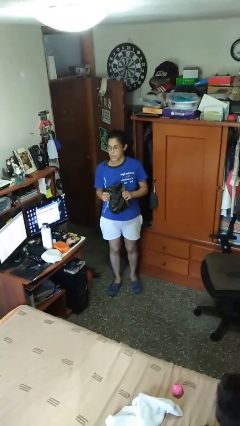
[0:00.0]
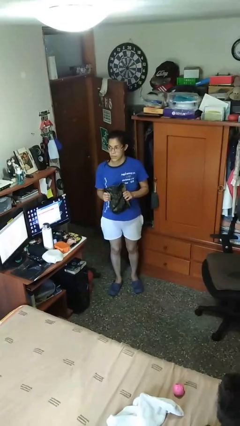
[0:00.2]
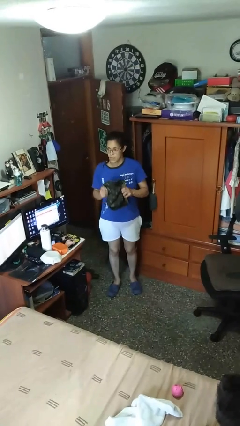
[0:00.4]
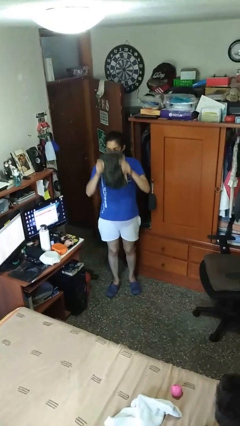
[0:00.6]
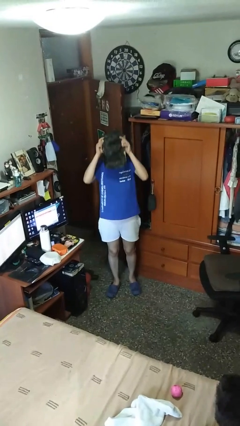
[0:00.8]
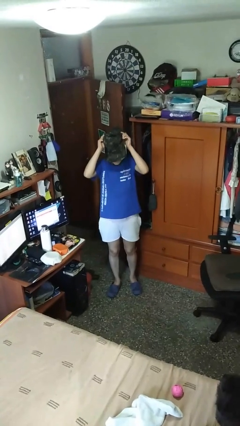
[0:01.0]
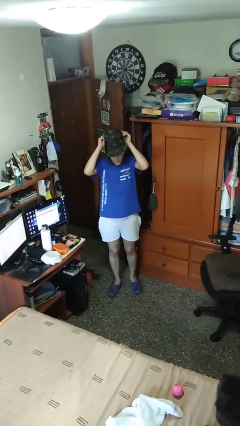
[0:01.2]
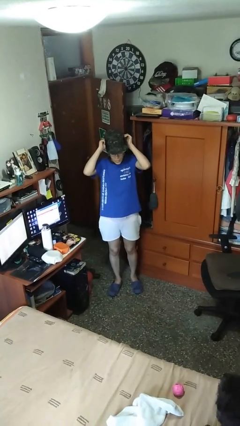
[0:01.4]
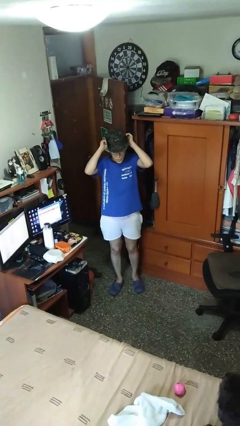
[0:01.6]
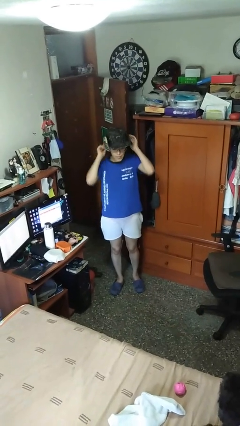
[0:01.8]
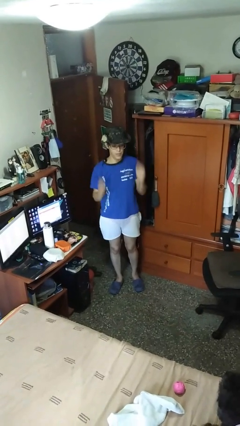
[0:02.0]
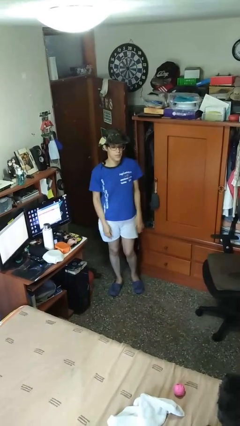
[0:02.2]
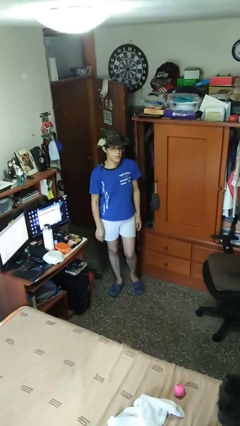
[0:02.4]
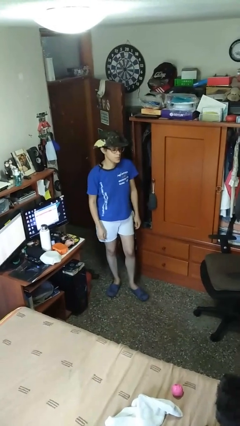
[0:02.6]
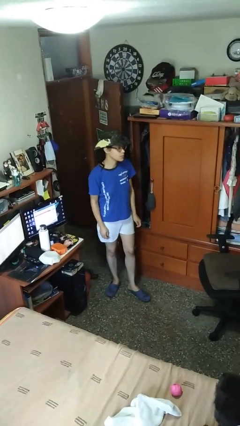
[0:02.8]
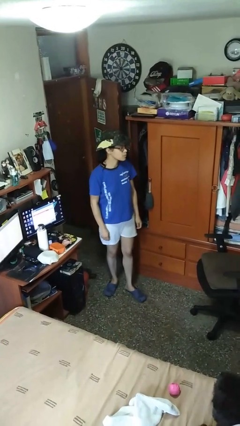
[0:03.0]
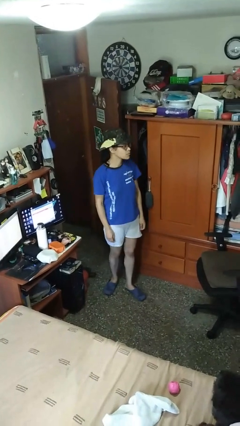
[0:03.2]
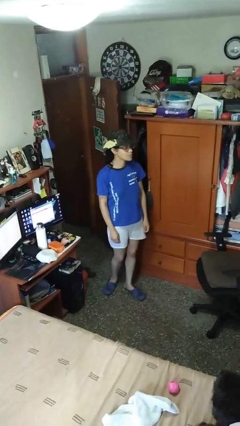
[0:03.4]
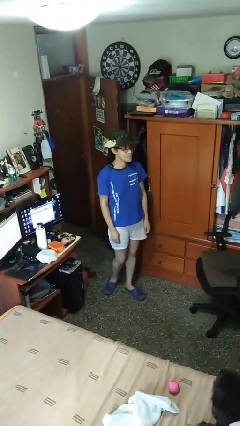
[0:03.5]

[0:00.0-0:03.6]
person puts on hat

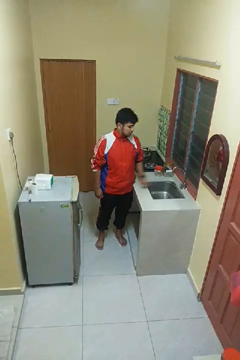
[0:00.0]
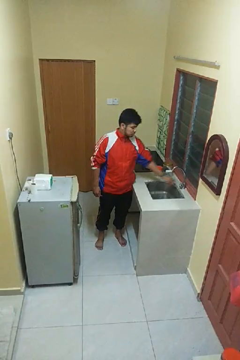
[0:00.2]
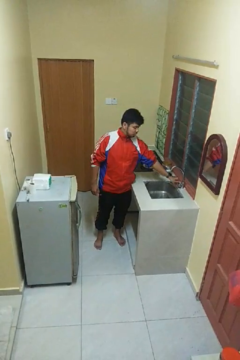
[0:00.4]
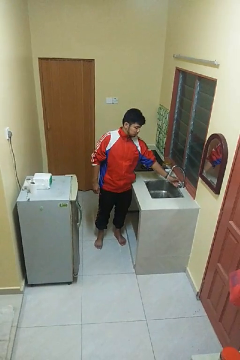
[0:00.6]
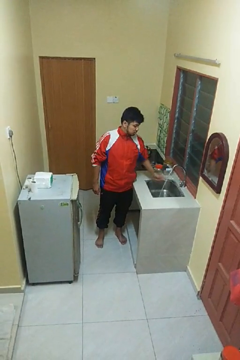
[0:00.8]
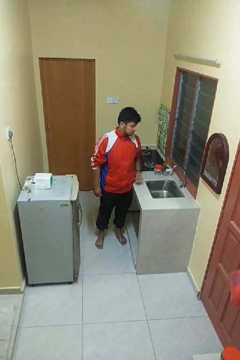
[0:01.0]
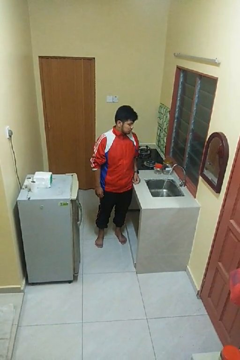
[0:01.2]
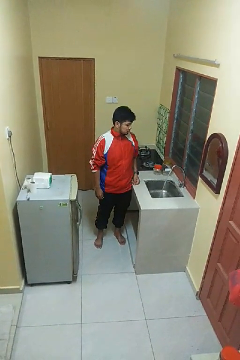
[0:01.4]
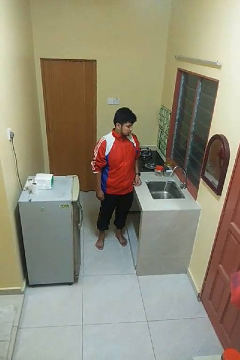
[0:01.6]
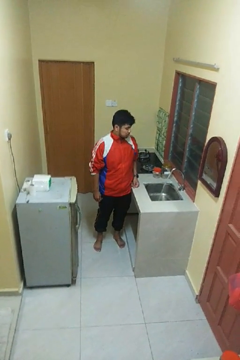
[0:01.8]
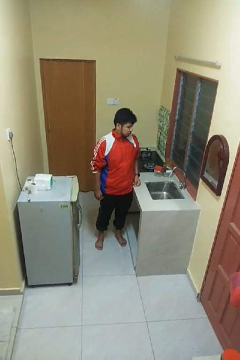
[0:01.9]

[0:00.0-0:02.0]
person turns on faucet

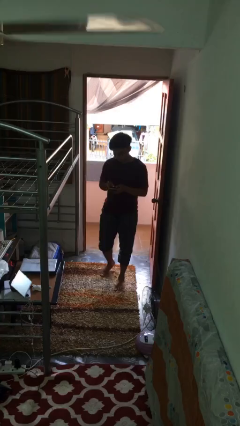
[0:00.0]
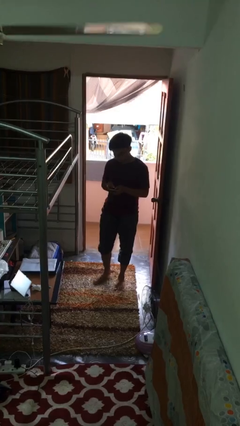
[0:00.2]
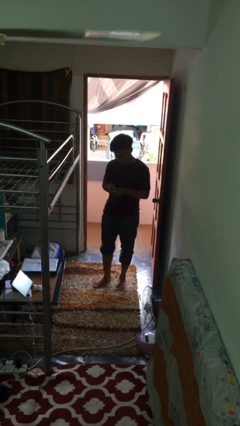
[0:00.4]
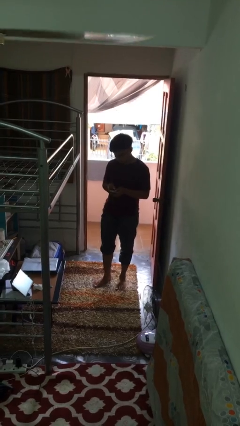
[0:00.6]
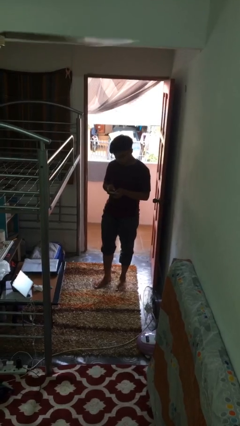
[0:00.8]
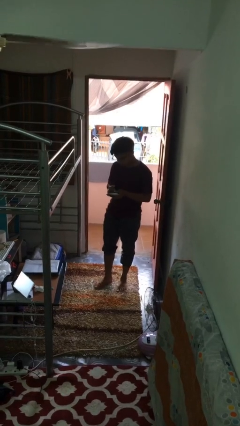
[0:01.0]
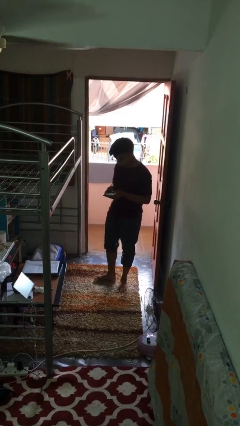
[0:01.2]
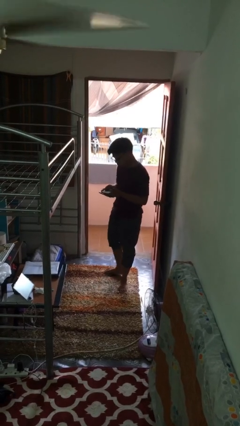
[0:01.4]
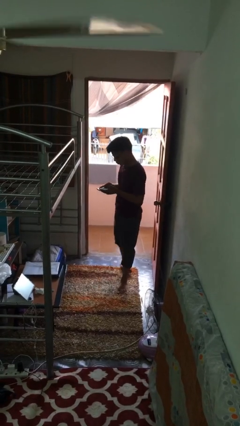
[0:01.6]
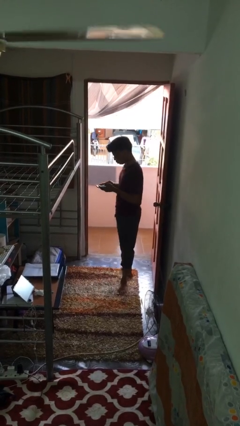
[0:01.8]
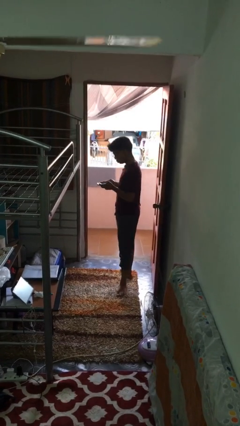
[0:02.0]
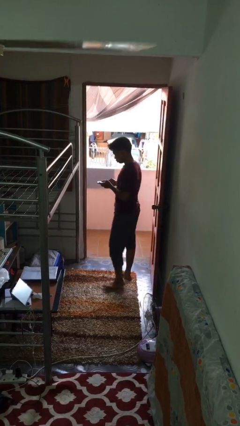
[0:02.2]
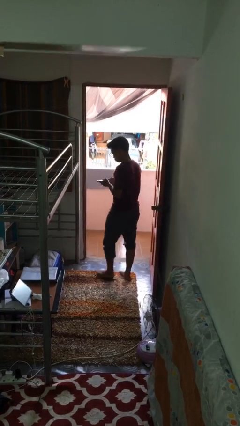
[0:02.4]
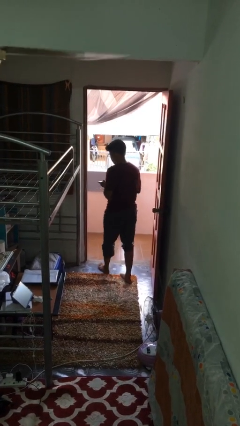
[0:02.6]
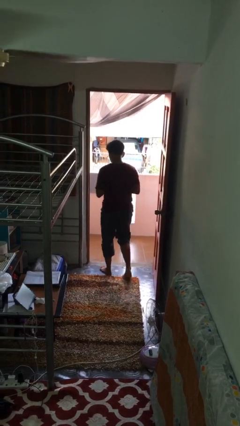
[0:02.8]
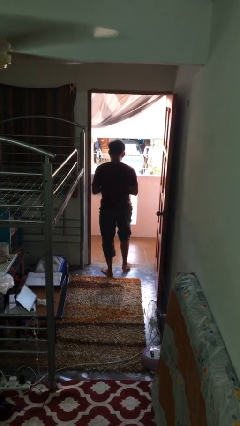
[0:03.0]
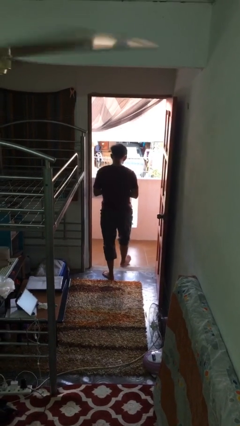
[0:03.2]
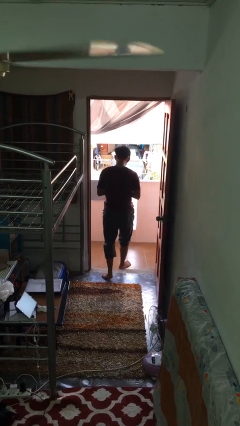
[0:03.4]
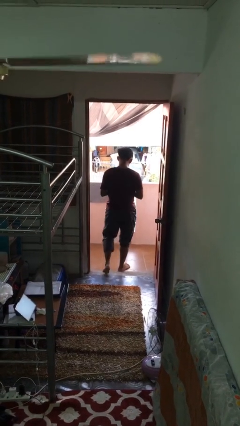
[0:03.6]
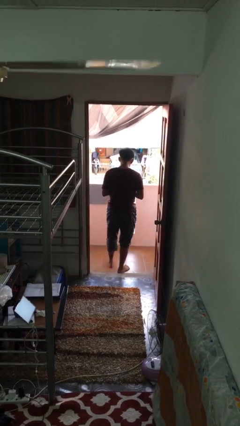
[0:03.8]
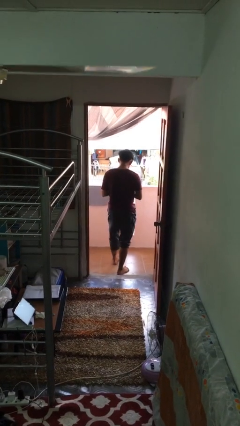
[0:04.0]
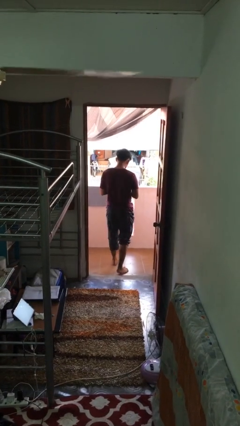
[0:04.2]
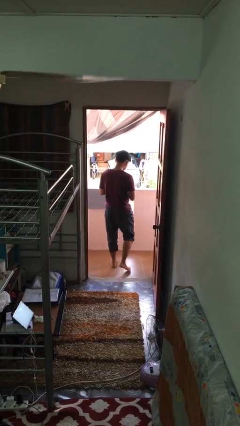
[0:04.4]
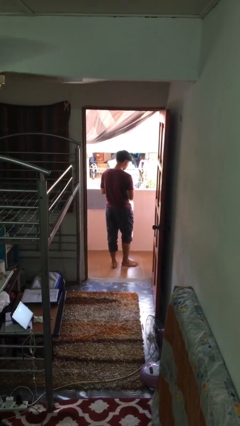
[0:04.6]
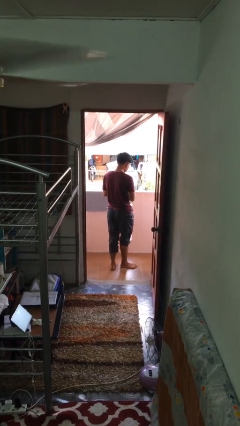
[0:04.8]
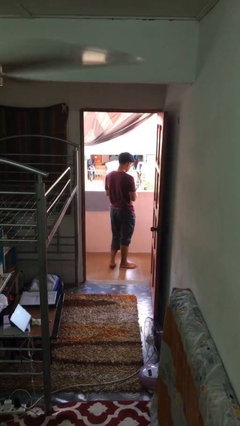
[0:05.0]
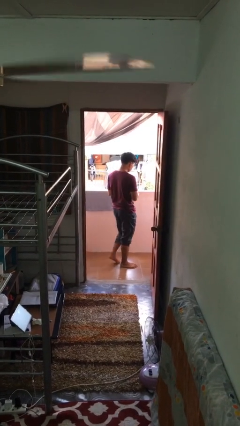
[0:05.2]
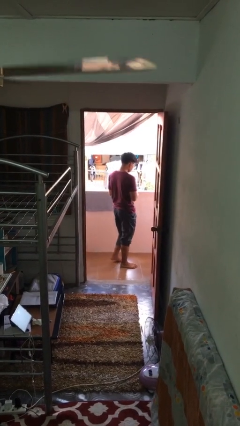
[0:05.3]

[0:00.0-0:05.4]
person exits scene through structure

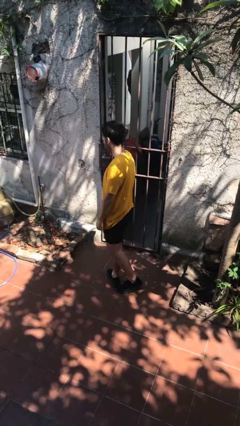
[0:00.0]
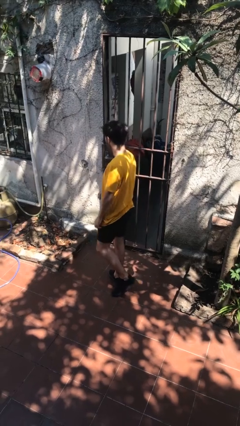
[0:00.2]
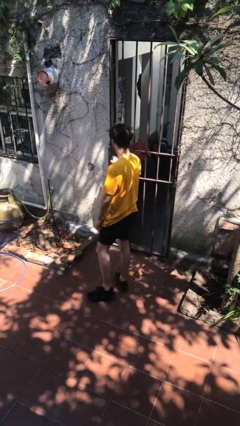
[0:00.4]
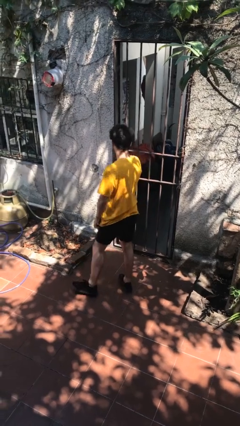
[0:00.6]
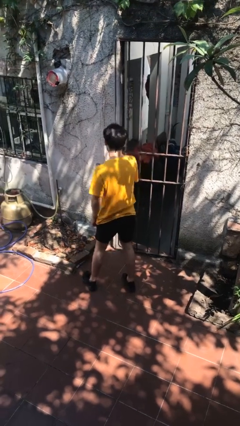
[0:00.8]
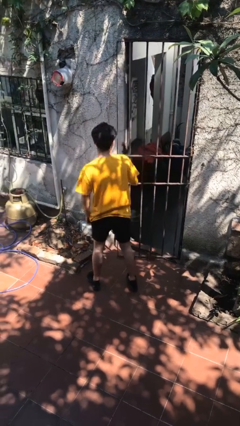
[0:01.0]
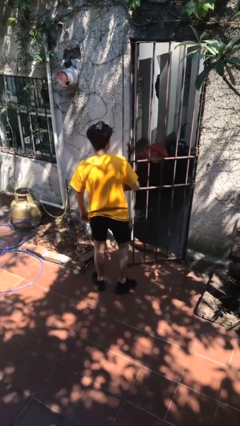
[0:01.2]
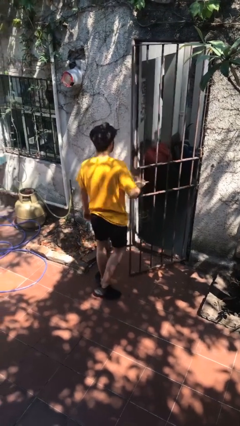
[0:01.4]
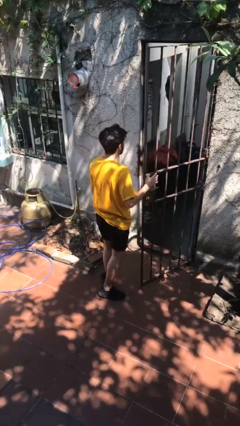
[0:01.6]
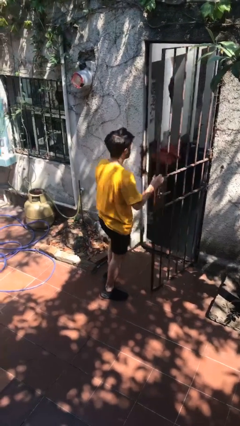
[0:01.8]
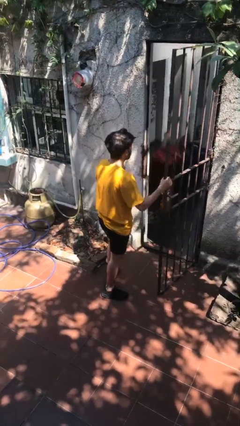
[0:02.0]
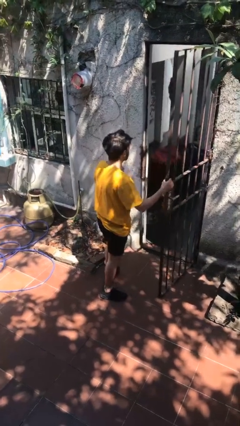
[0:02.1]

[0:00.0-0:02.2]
person opens facility door

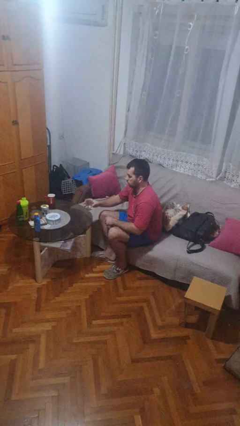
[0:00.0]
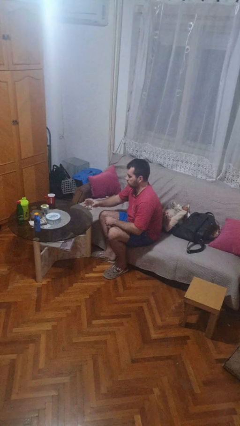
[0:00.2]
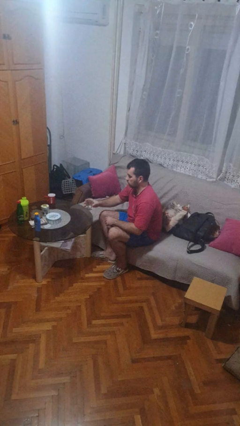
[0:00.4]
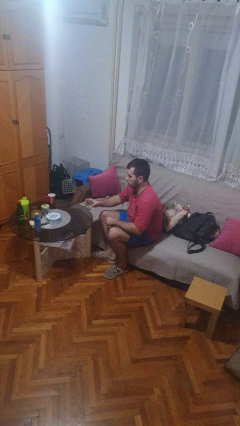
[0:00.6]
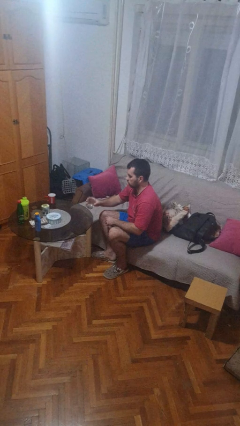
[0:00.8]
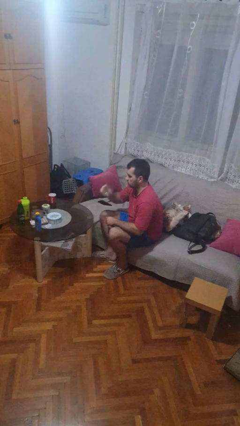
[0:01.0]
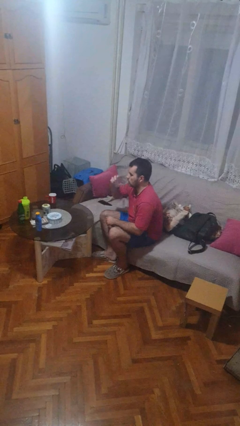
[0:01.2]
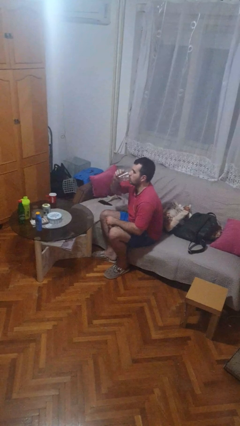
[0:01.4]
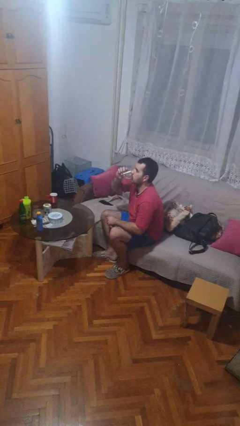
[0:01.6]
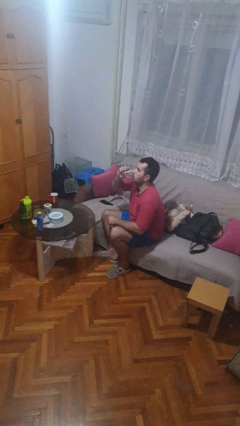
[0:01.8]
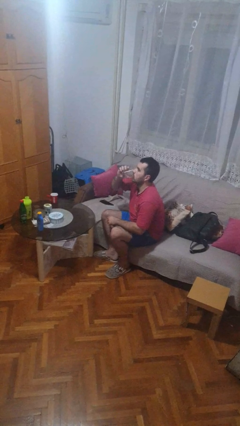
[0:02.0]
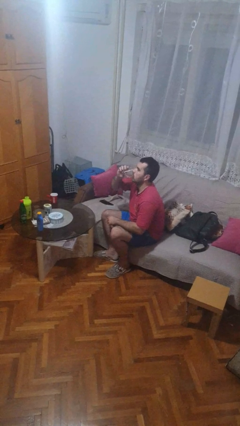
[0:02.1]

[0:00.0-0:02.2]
person drinks from shotglass

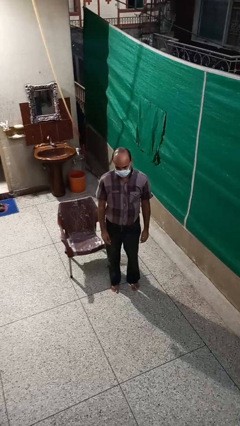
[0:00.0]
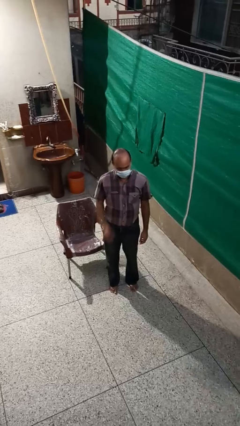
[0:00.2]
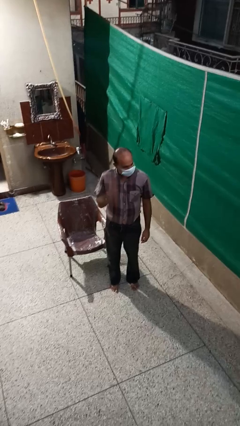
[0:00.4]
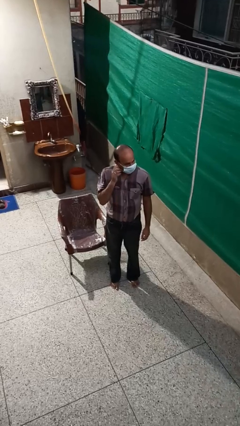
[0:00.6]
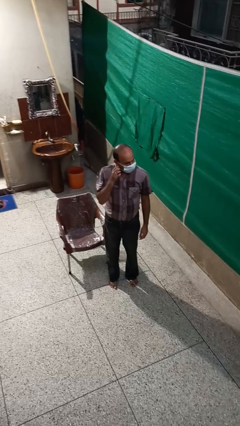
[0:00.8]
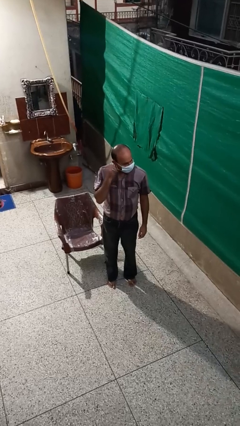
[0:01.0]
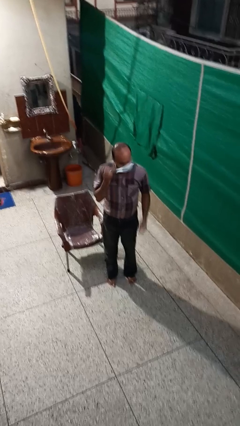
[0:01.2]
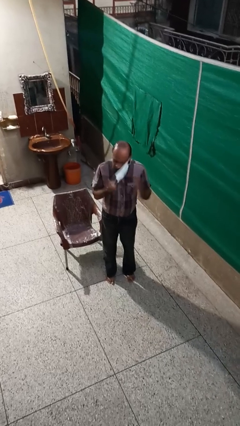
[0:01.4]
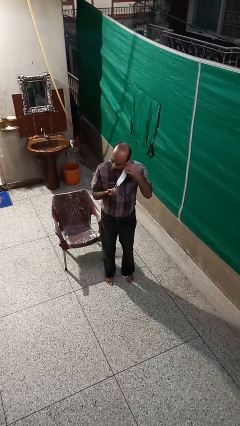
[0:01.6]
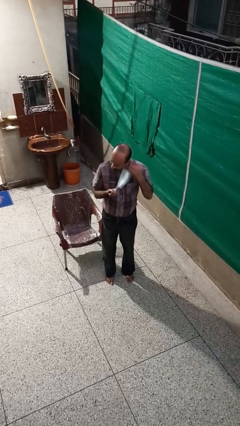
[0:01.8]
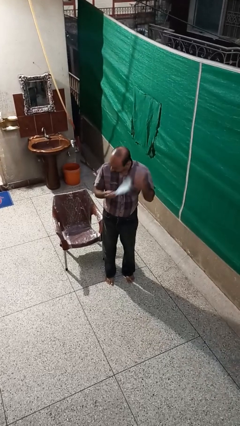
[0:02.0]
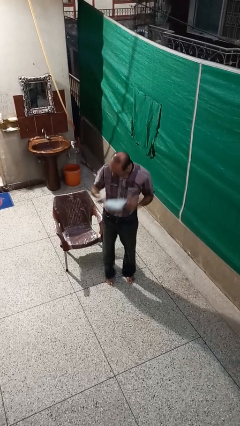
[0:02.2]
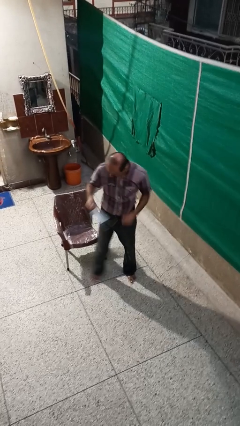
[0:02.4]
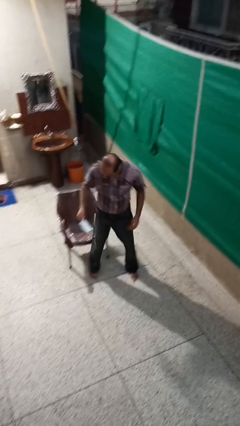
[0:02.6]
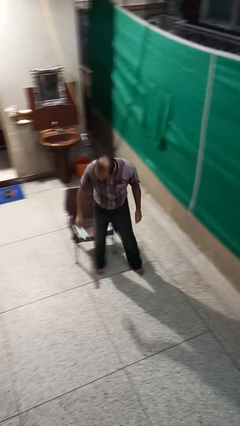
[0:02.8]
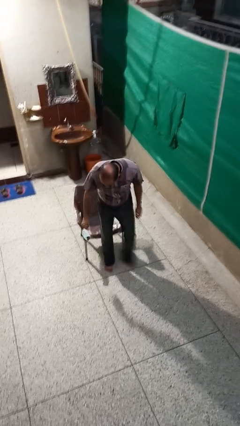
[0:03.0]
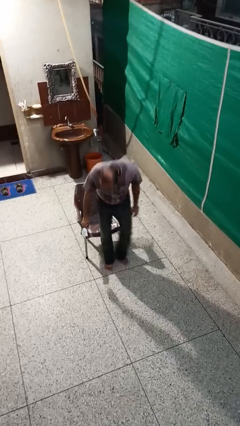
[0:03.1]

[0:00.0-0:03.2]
person takes off facemask
